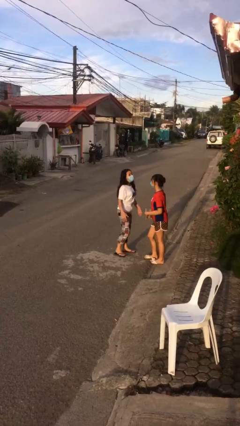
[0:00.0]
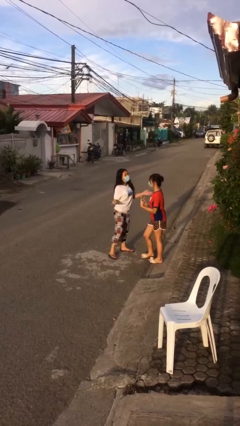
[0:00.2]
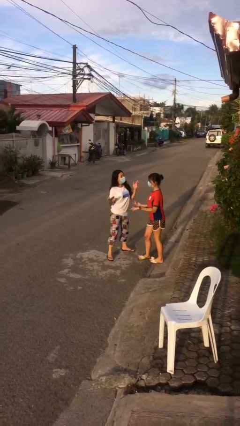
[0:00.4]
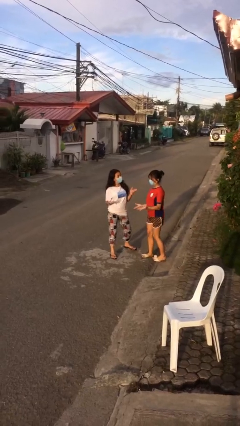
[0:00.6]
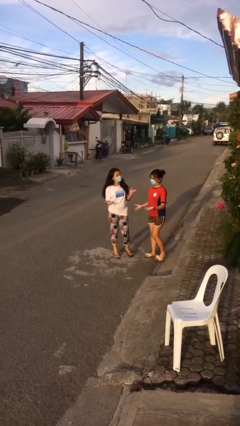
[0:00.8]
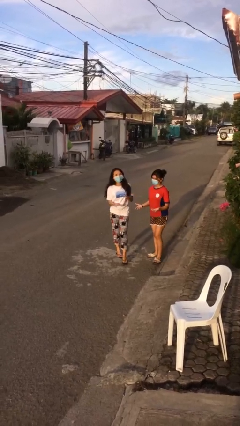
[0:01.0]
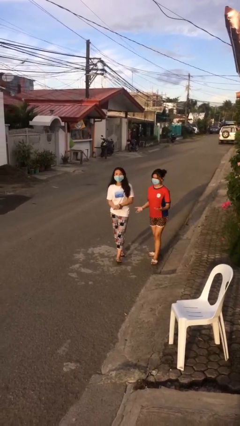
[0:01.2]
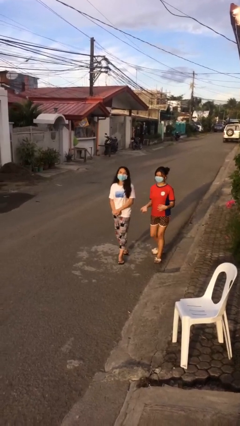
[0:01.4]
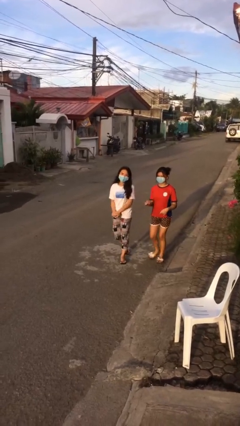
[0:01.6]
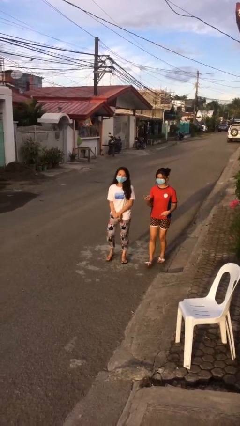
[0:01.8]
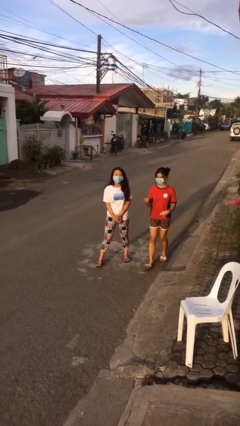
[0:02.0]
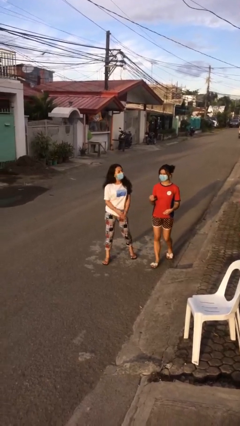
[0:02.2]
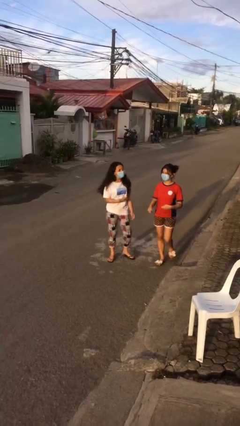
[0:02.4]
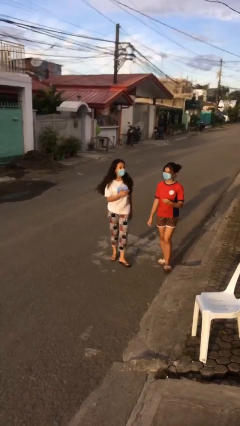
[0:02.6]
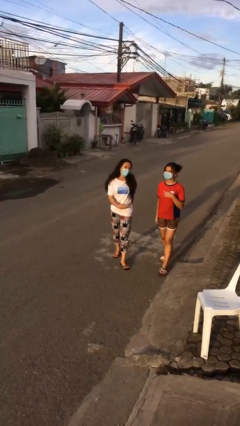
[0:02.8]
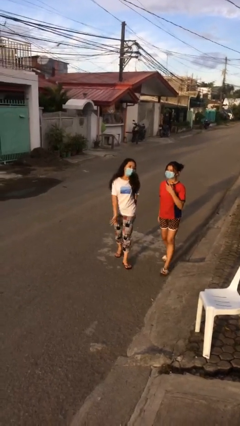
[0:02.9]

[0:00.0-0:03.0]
person talks to person

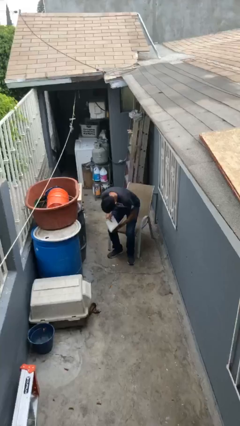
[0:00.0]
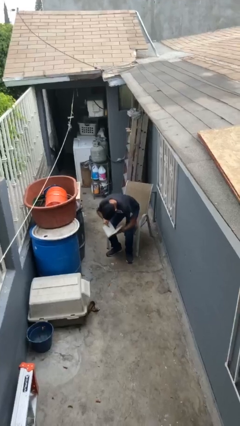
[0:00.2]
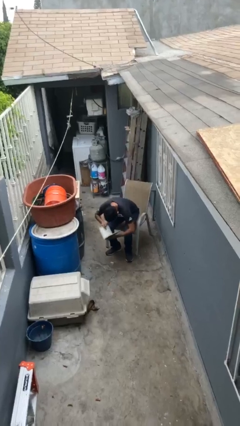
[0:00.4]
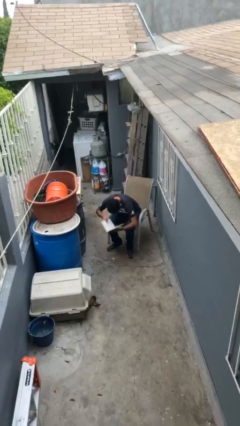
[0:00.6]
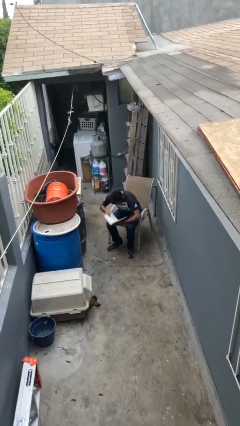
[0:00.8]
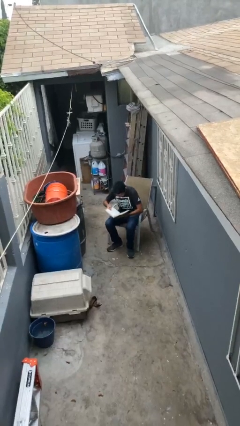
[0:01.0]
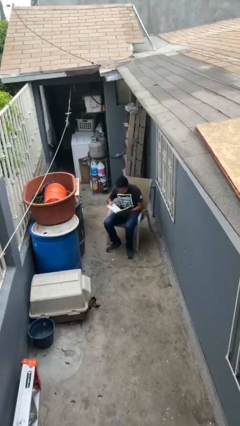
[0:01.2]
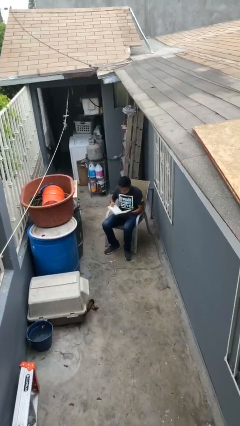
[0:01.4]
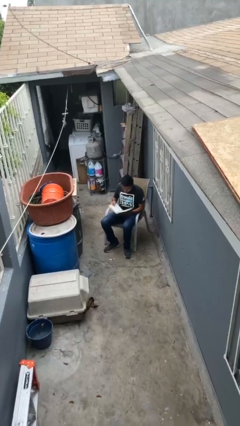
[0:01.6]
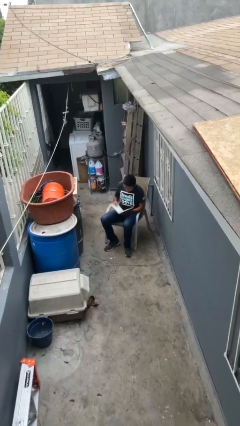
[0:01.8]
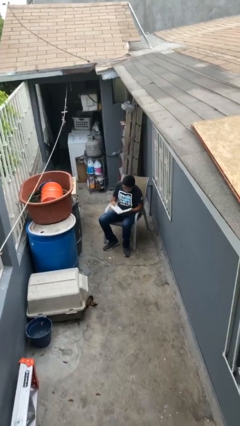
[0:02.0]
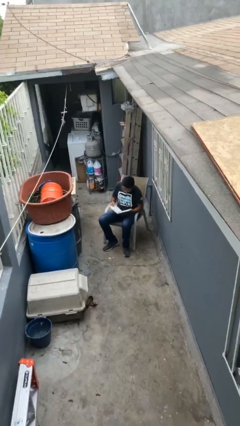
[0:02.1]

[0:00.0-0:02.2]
person sits down

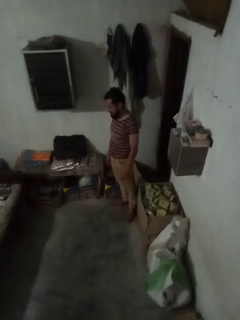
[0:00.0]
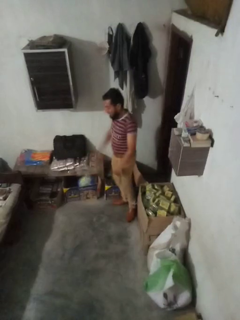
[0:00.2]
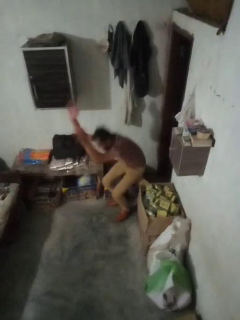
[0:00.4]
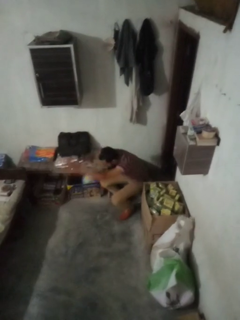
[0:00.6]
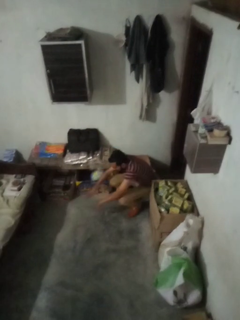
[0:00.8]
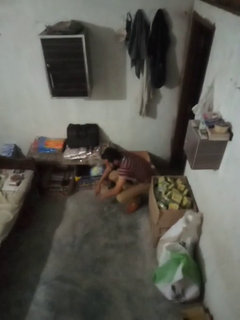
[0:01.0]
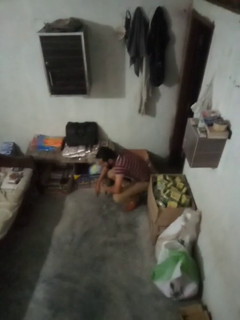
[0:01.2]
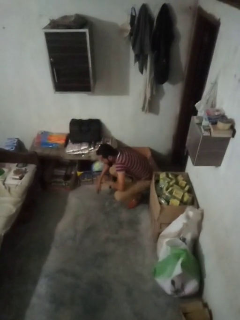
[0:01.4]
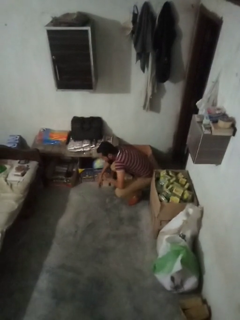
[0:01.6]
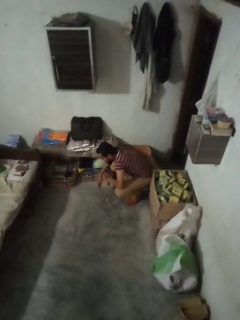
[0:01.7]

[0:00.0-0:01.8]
person trips on object on floor

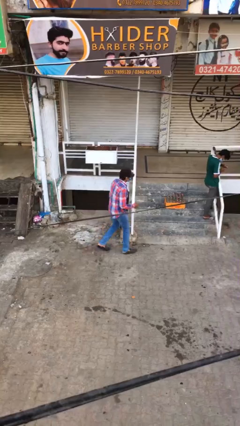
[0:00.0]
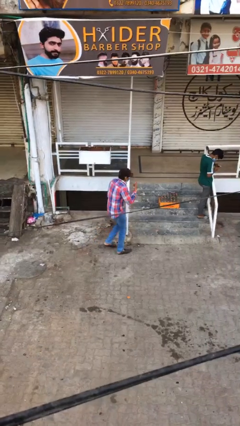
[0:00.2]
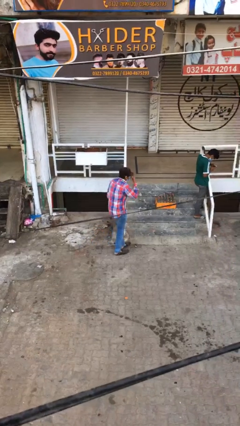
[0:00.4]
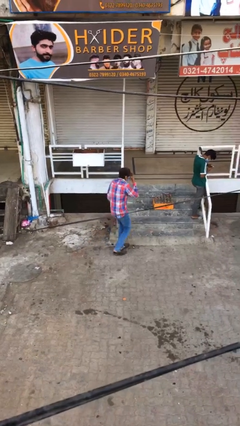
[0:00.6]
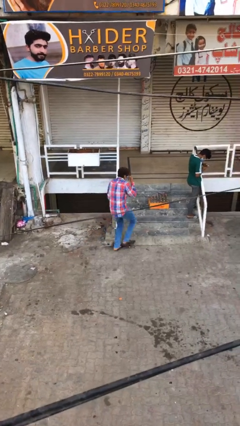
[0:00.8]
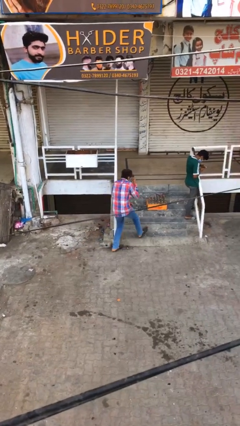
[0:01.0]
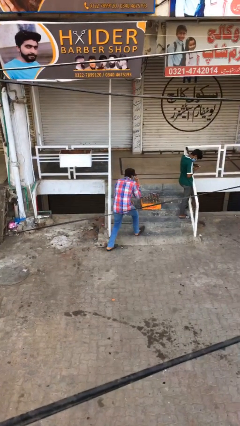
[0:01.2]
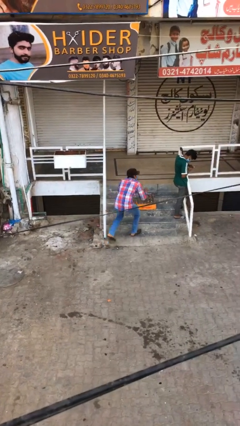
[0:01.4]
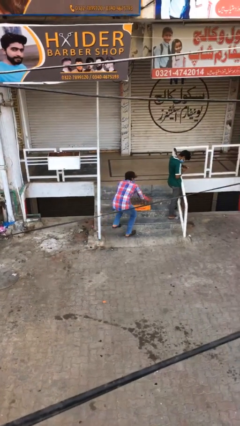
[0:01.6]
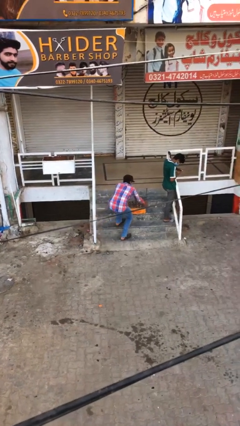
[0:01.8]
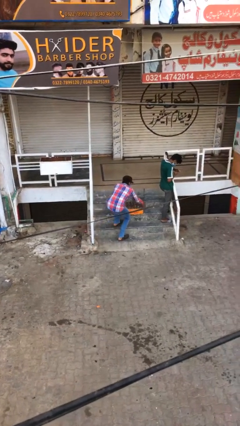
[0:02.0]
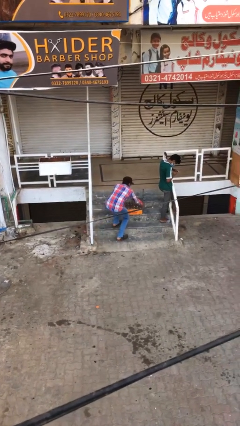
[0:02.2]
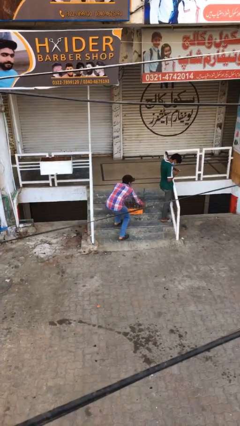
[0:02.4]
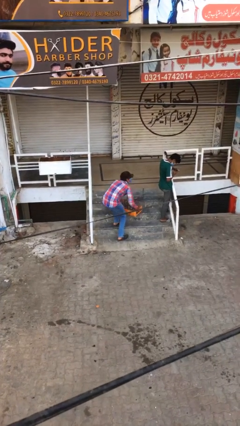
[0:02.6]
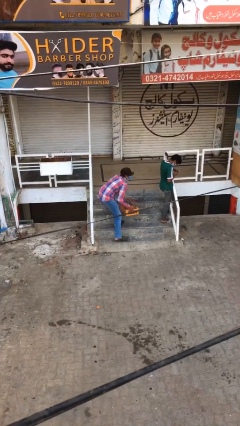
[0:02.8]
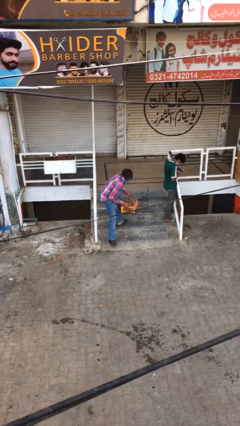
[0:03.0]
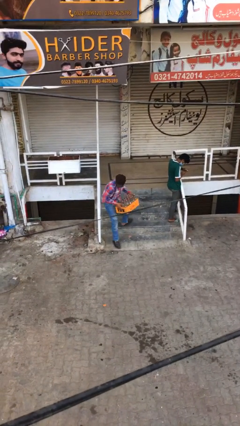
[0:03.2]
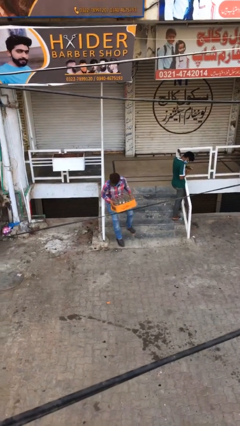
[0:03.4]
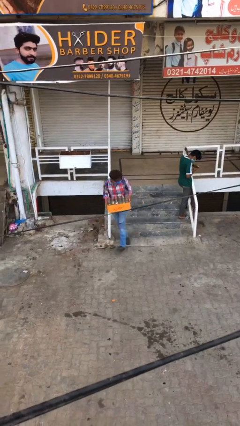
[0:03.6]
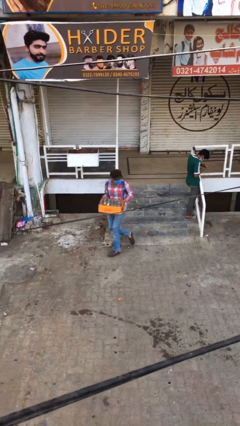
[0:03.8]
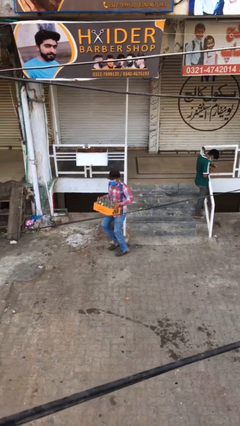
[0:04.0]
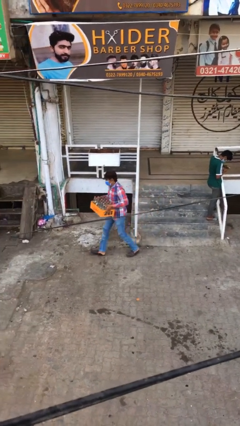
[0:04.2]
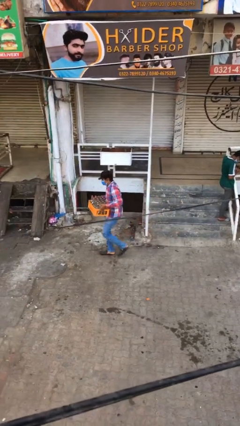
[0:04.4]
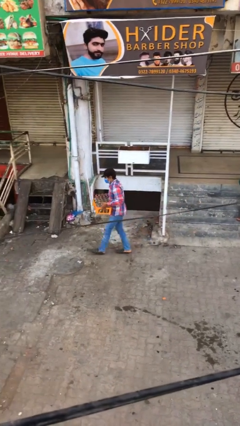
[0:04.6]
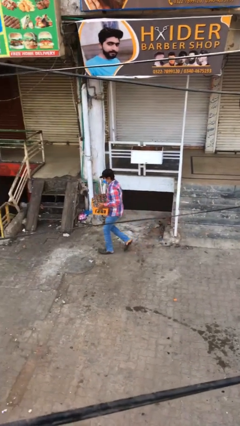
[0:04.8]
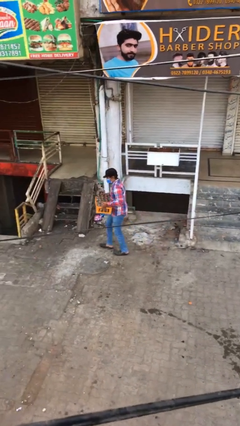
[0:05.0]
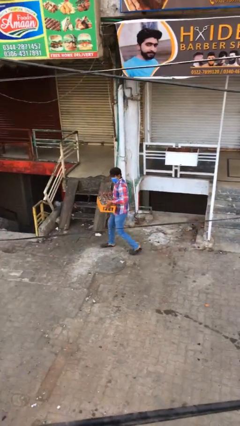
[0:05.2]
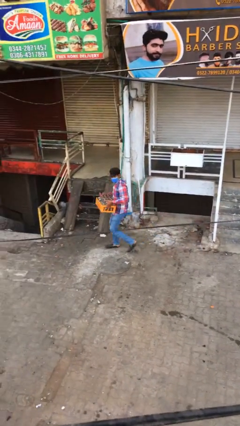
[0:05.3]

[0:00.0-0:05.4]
person steals object from person

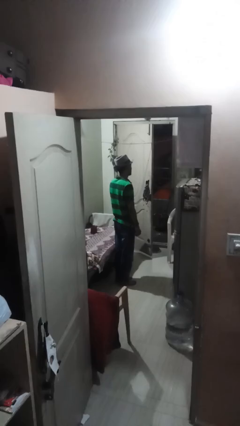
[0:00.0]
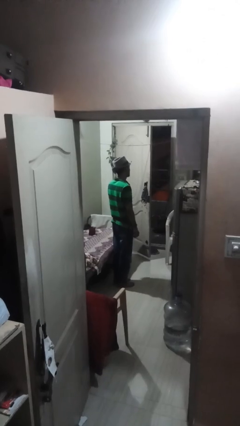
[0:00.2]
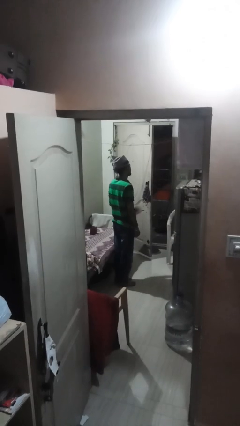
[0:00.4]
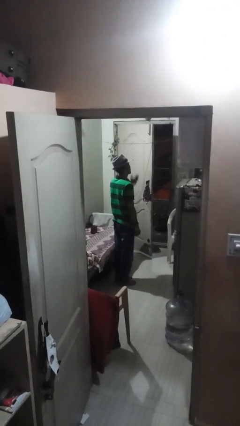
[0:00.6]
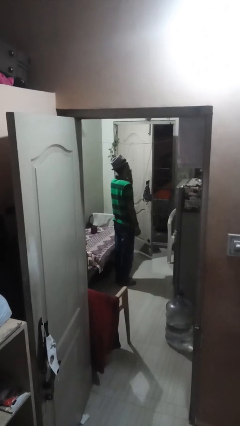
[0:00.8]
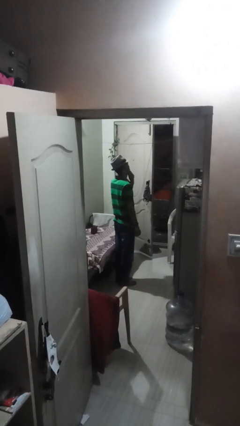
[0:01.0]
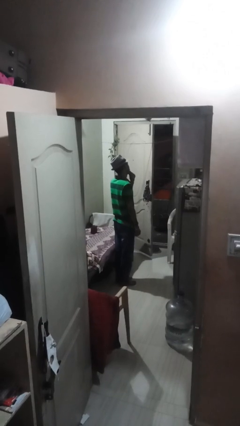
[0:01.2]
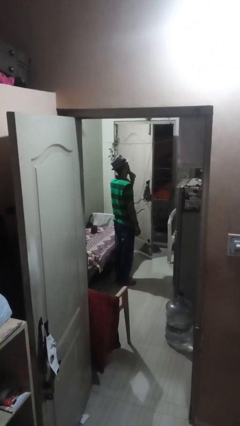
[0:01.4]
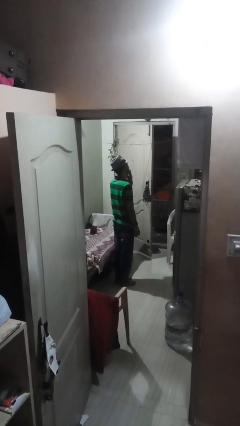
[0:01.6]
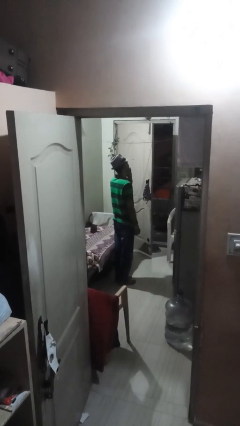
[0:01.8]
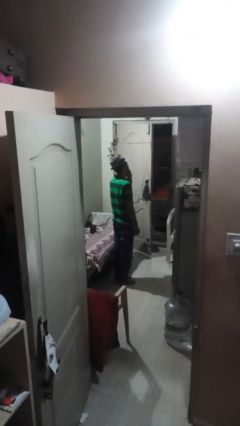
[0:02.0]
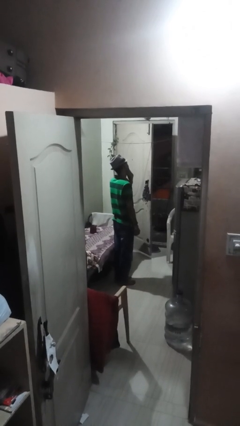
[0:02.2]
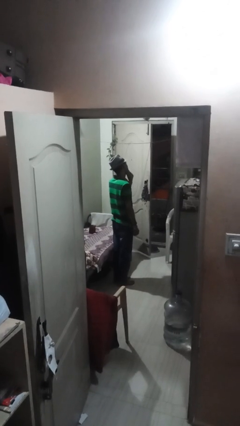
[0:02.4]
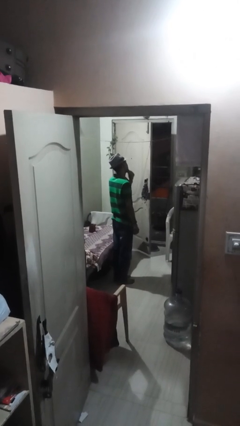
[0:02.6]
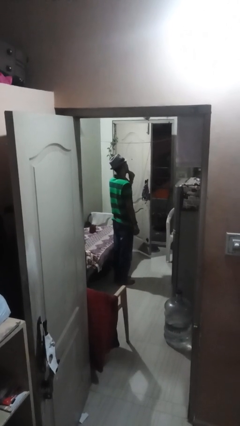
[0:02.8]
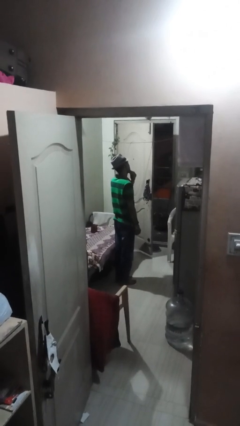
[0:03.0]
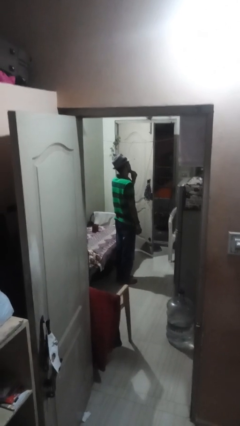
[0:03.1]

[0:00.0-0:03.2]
person strokes chin

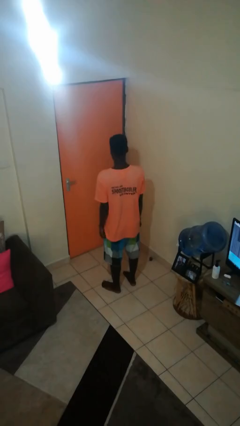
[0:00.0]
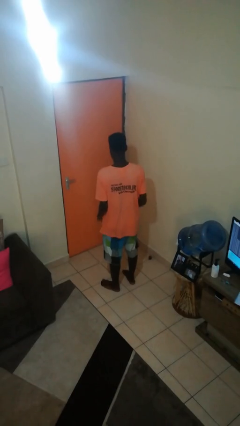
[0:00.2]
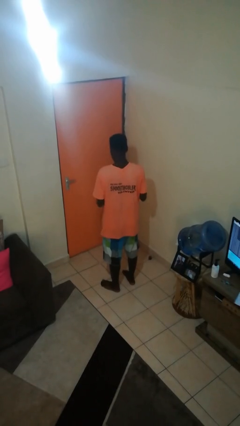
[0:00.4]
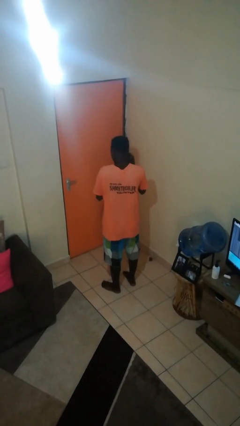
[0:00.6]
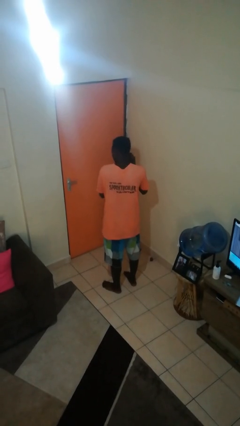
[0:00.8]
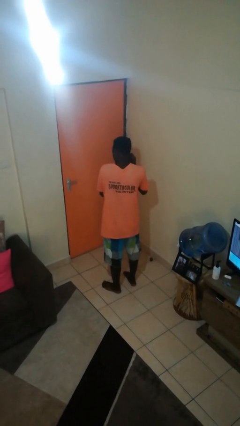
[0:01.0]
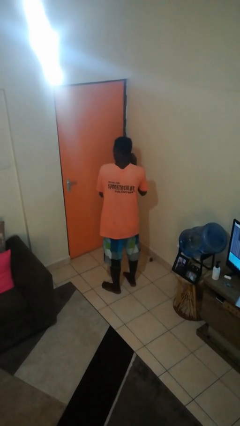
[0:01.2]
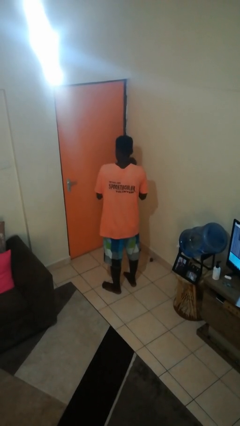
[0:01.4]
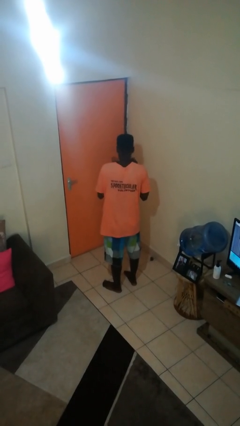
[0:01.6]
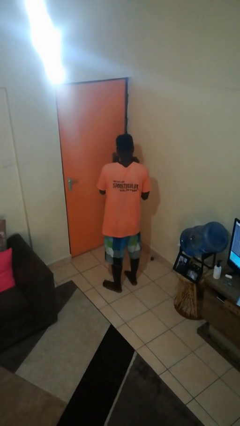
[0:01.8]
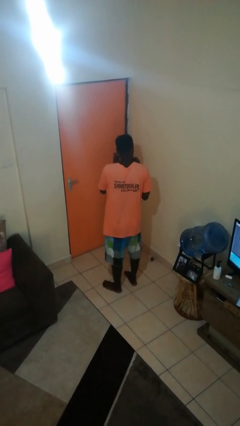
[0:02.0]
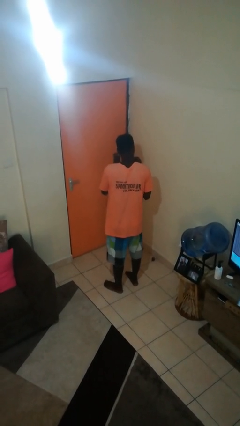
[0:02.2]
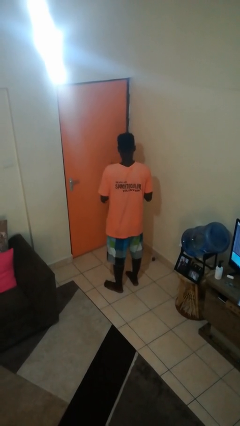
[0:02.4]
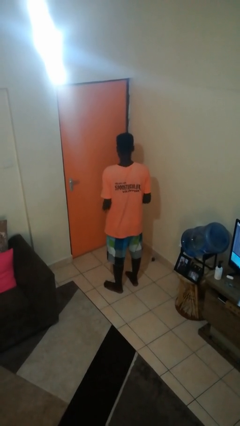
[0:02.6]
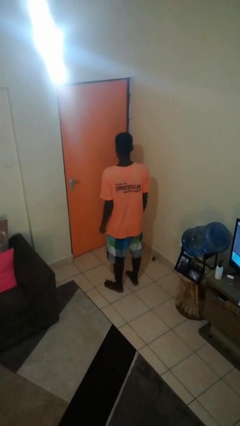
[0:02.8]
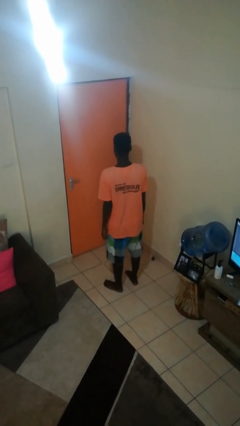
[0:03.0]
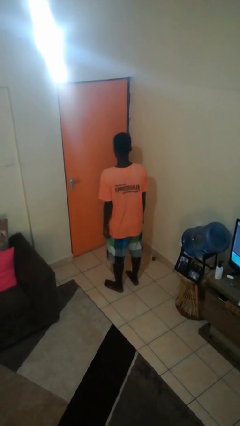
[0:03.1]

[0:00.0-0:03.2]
person puts on earrings
